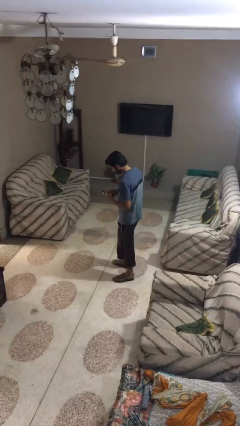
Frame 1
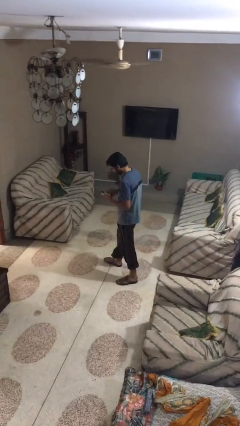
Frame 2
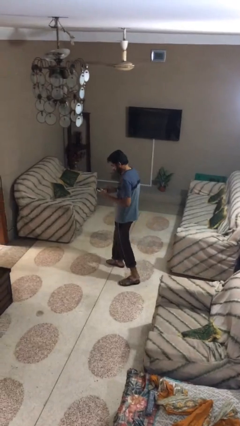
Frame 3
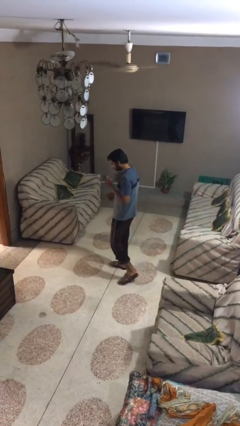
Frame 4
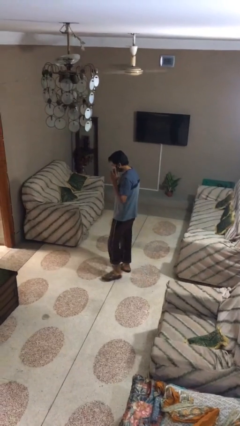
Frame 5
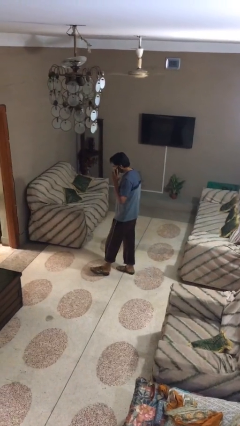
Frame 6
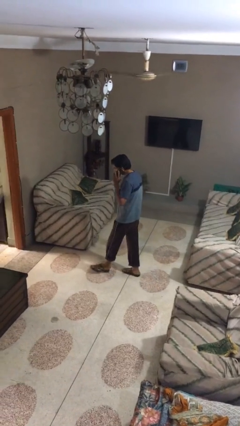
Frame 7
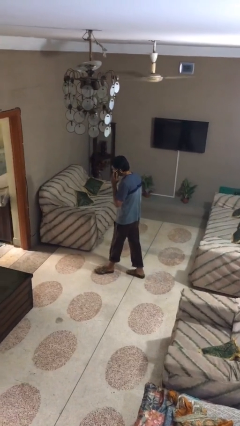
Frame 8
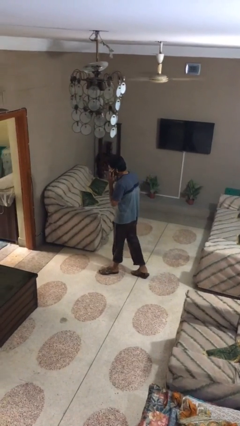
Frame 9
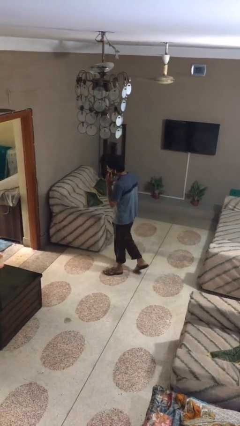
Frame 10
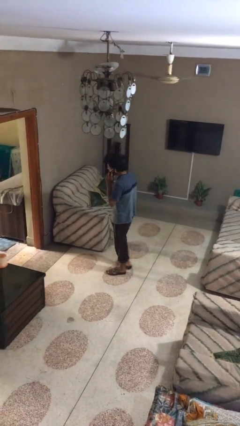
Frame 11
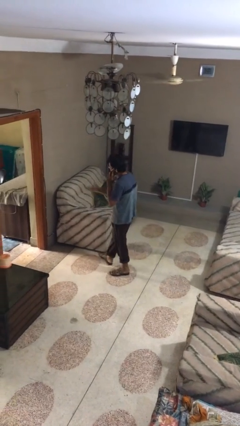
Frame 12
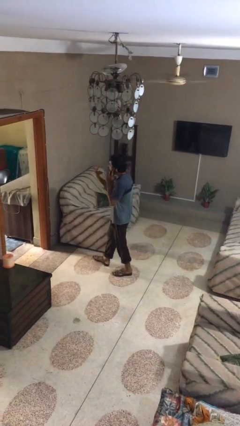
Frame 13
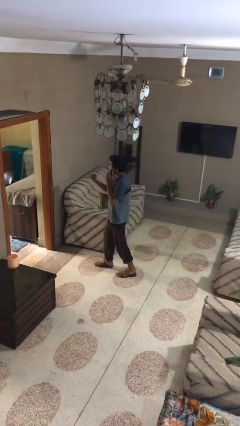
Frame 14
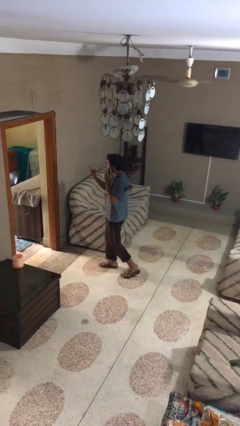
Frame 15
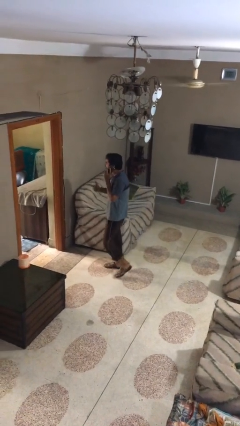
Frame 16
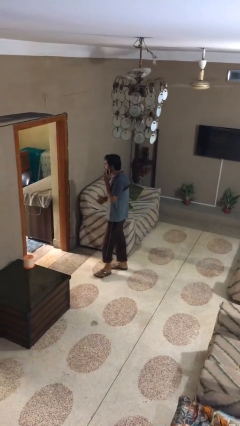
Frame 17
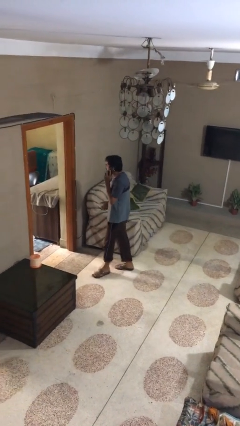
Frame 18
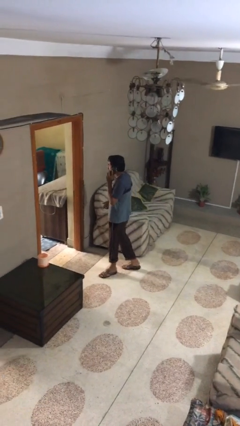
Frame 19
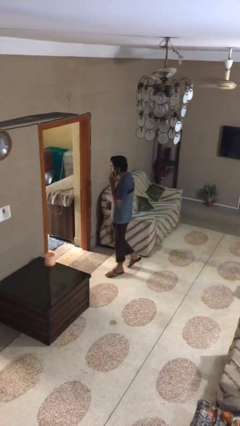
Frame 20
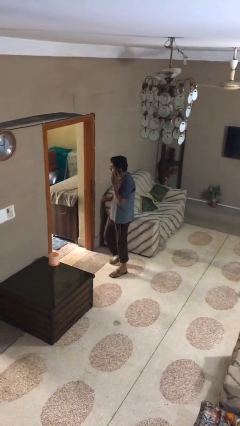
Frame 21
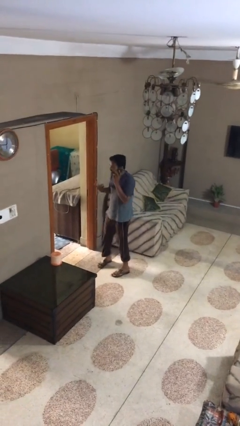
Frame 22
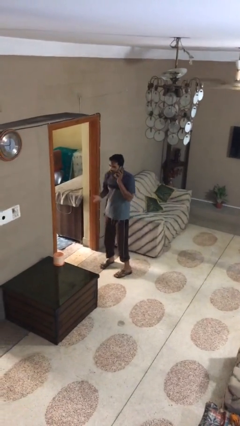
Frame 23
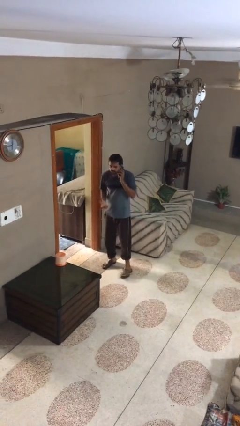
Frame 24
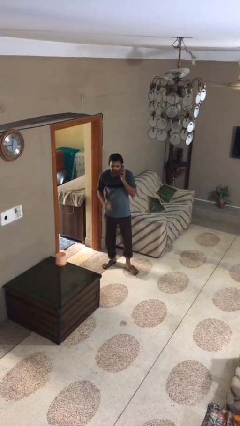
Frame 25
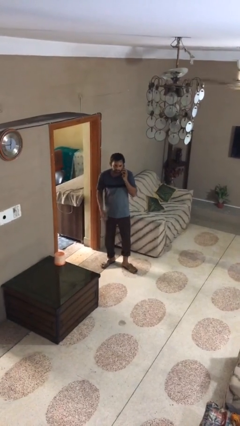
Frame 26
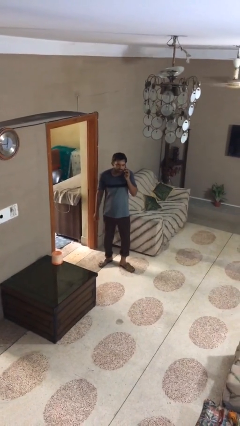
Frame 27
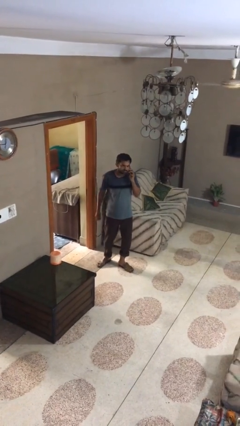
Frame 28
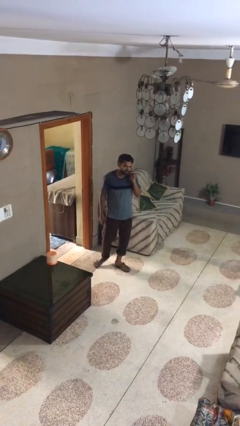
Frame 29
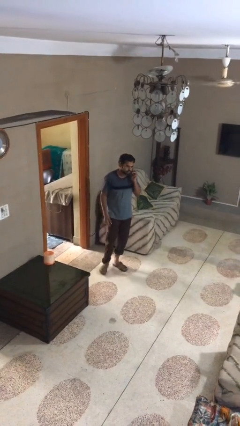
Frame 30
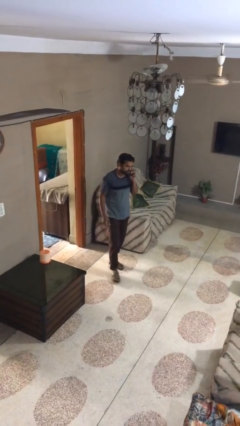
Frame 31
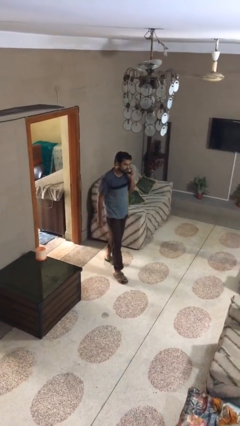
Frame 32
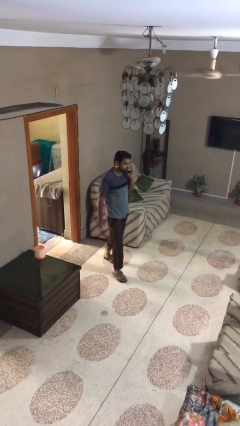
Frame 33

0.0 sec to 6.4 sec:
person talks on phone

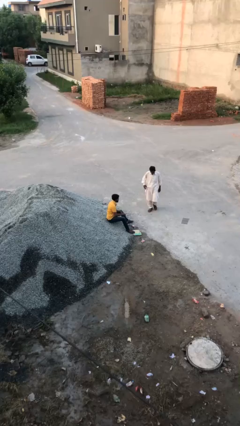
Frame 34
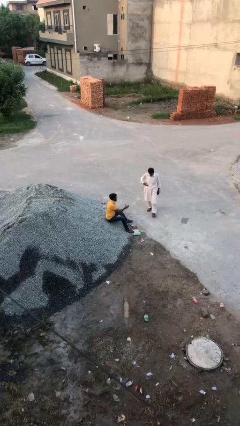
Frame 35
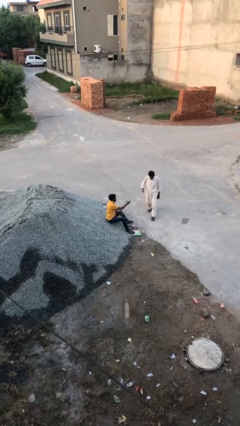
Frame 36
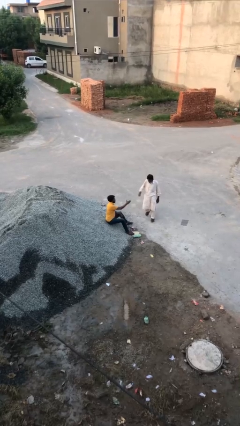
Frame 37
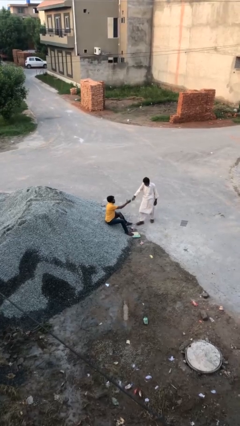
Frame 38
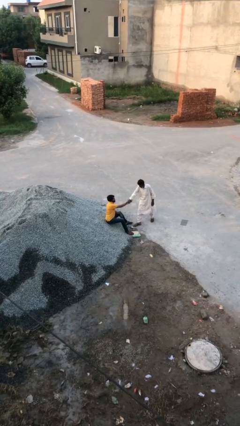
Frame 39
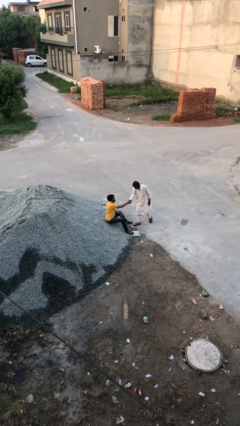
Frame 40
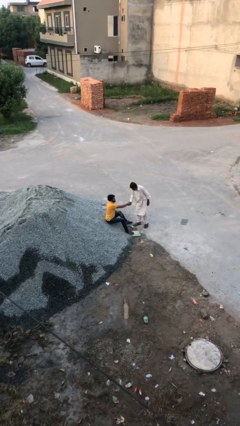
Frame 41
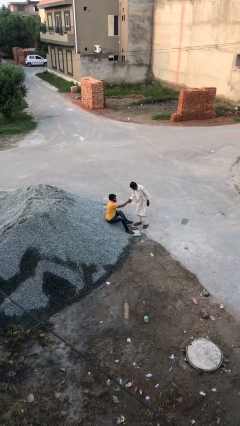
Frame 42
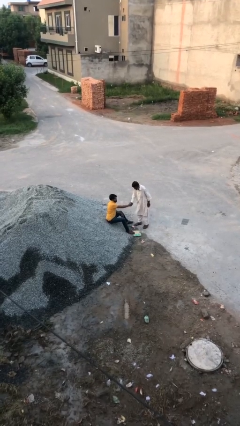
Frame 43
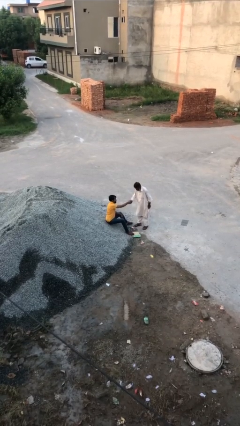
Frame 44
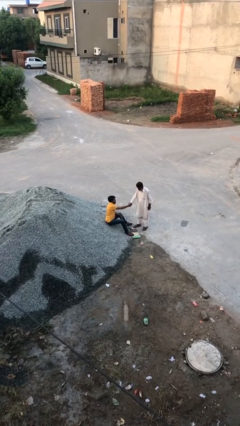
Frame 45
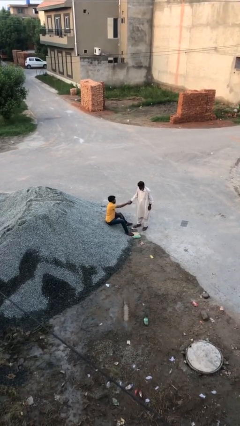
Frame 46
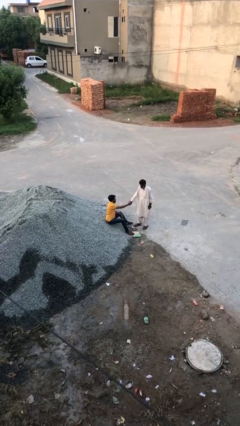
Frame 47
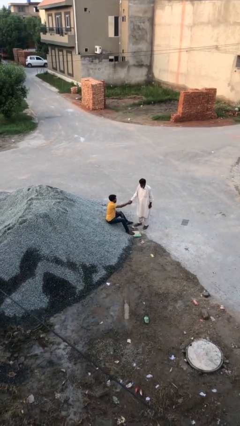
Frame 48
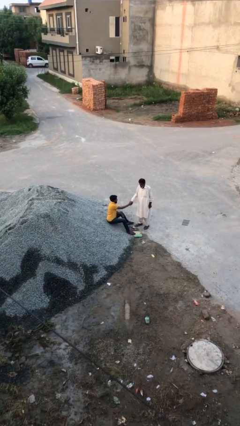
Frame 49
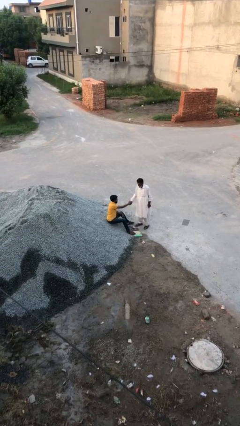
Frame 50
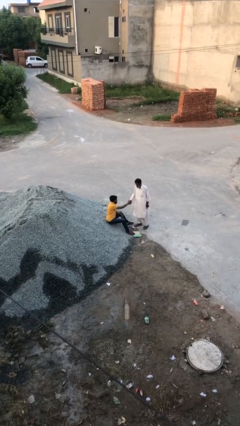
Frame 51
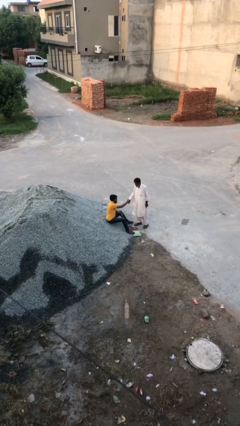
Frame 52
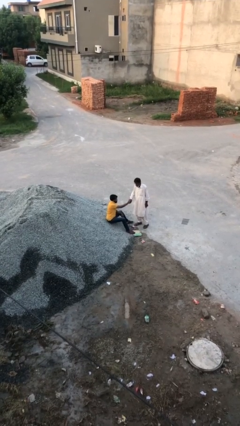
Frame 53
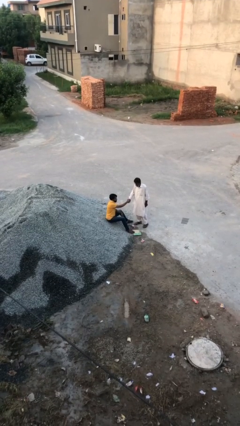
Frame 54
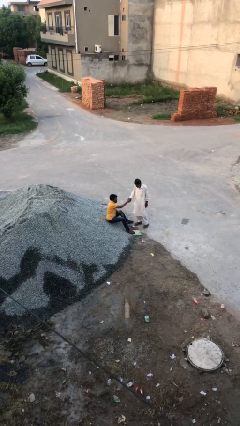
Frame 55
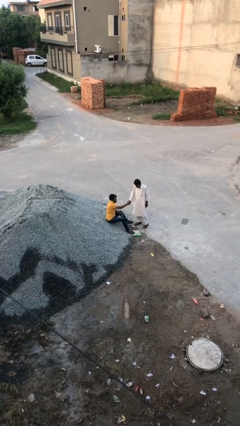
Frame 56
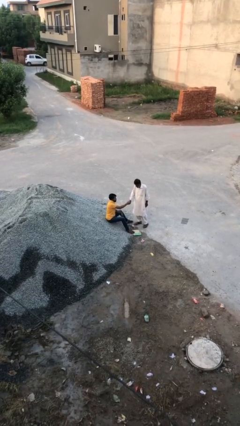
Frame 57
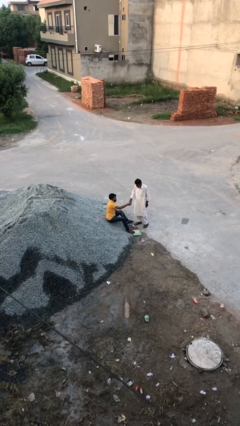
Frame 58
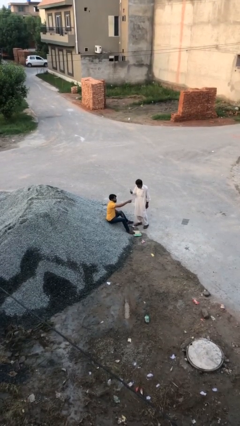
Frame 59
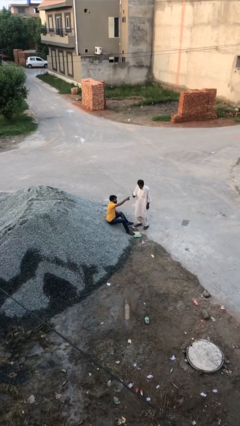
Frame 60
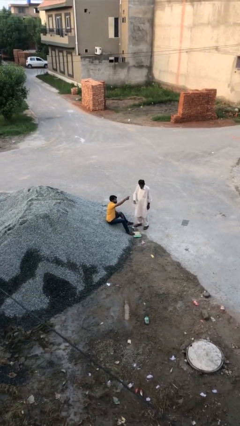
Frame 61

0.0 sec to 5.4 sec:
person shakes hand

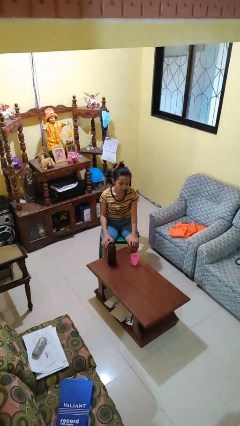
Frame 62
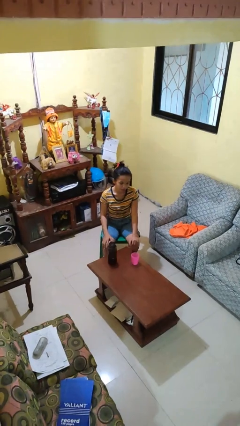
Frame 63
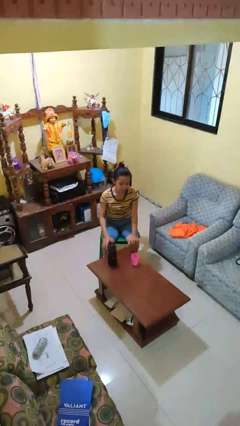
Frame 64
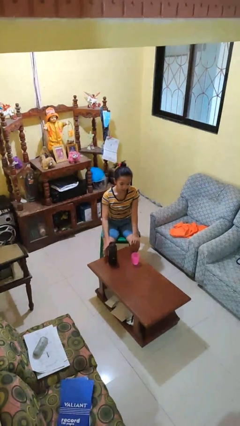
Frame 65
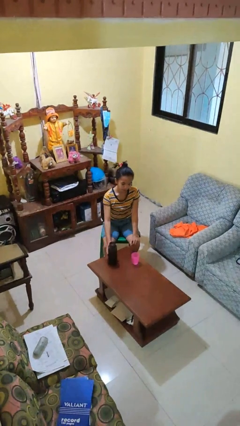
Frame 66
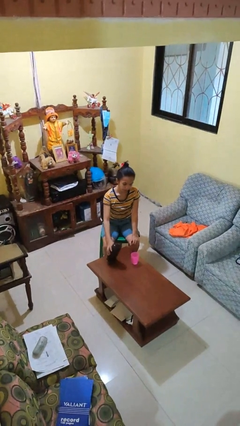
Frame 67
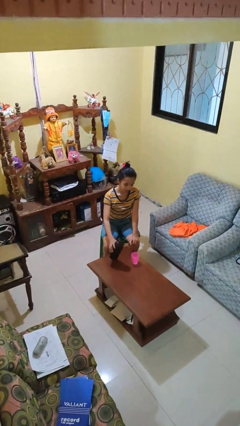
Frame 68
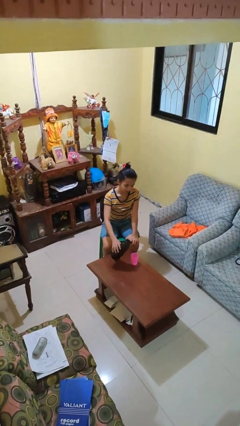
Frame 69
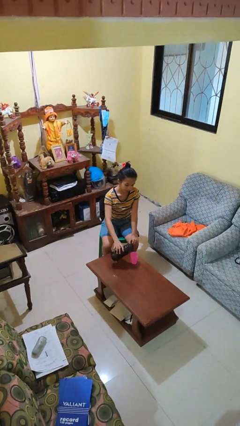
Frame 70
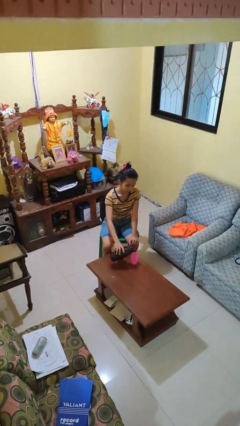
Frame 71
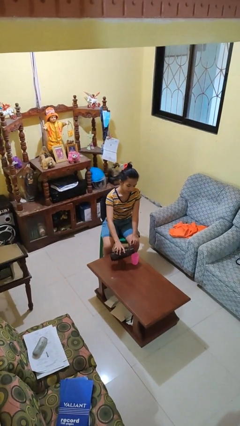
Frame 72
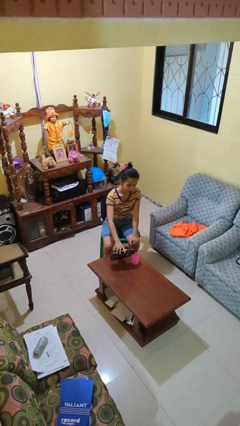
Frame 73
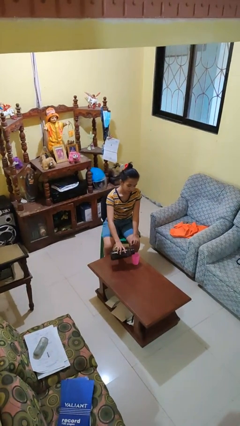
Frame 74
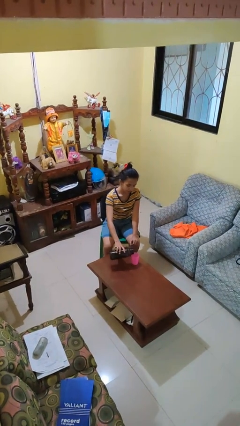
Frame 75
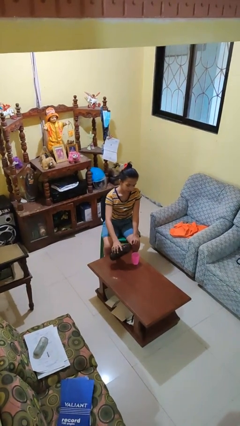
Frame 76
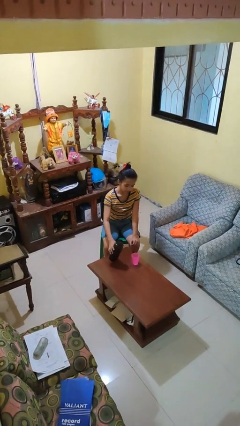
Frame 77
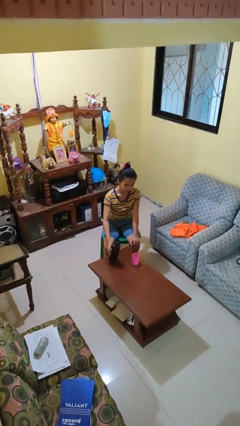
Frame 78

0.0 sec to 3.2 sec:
person pours liquid into cup

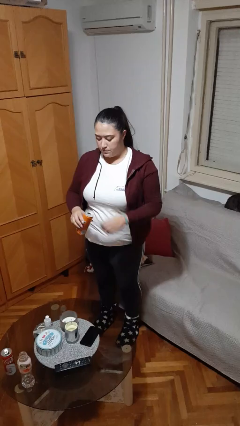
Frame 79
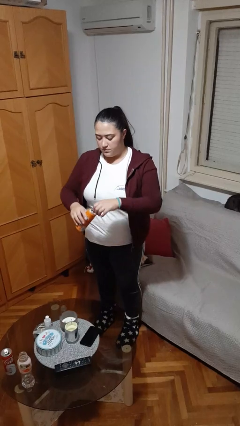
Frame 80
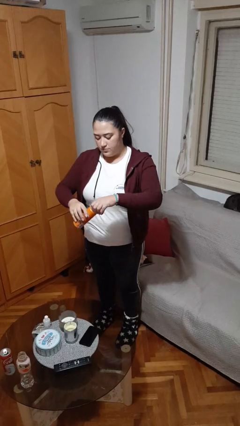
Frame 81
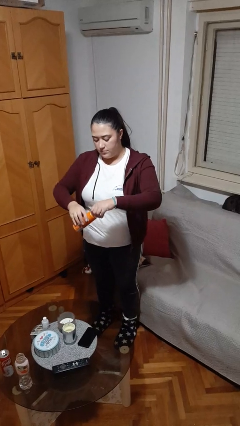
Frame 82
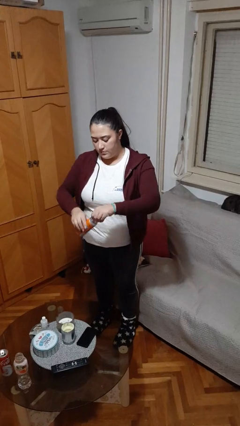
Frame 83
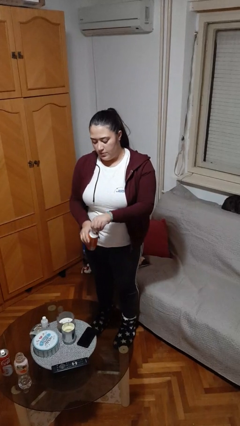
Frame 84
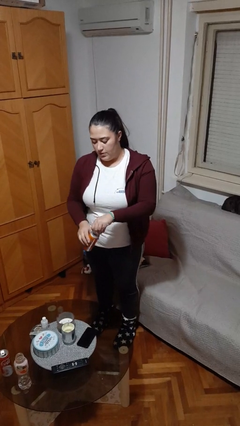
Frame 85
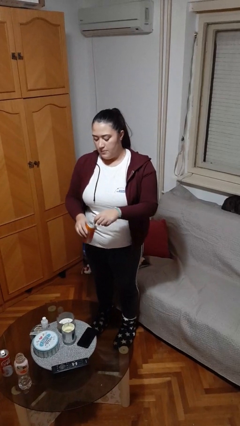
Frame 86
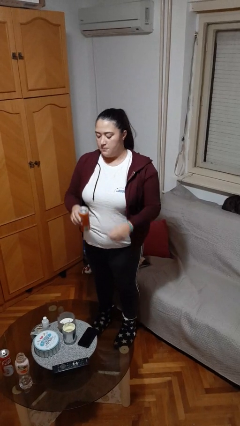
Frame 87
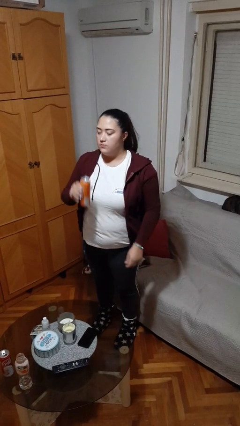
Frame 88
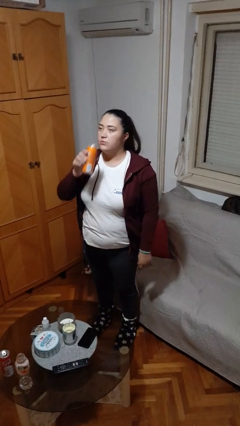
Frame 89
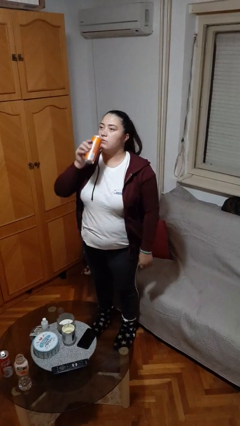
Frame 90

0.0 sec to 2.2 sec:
person opens beverage can

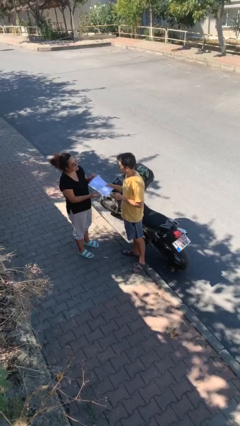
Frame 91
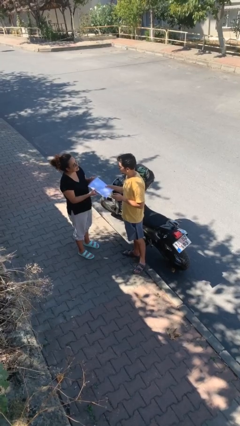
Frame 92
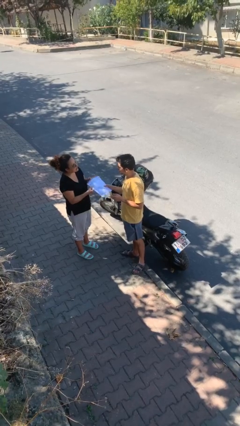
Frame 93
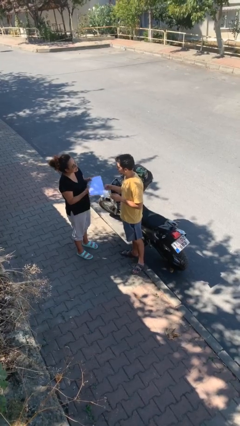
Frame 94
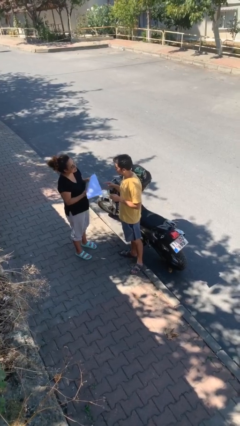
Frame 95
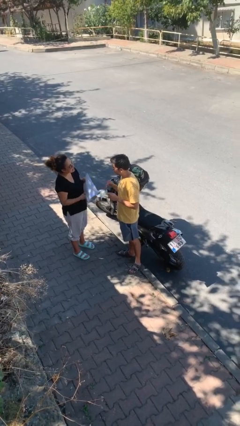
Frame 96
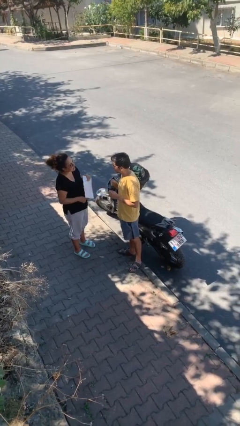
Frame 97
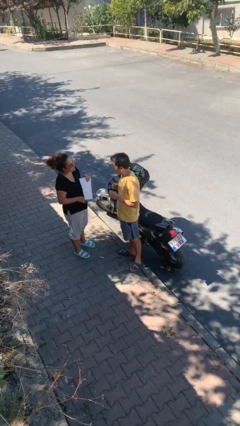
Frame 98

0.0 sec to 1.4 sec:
person transfers object to person
